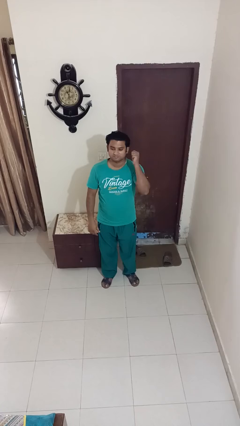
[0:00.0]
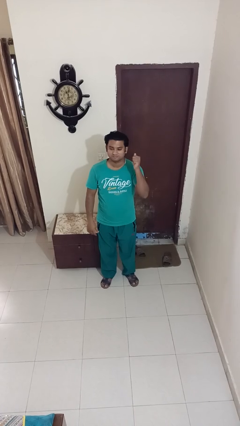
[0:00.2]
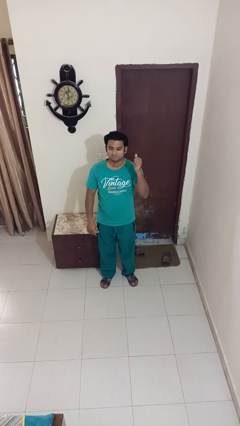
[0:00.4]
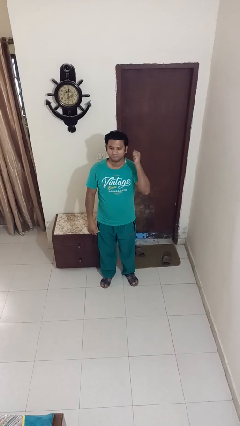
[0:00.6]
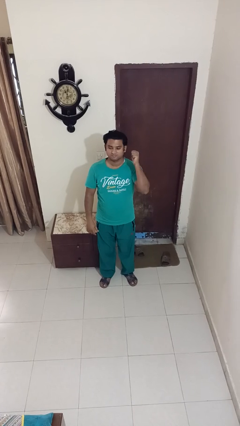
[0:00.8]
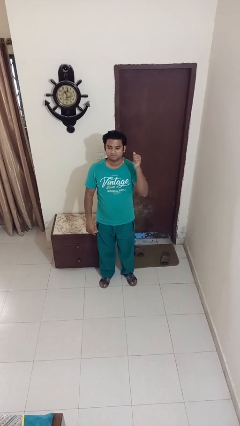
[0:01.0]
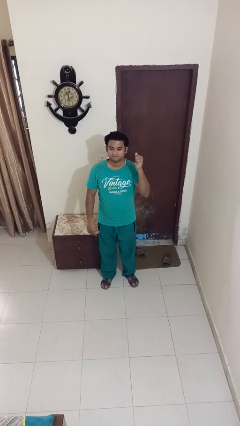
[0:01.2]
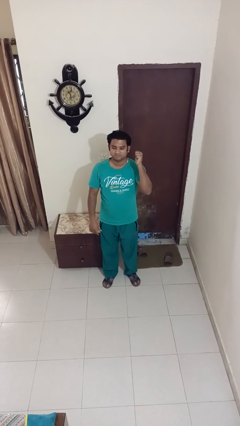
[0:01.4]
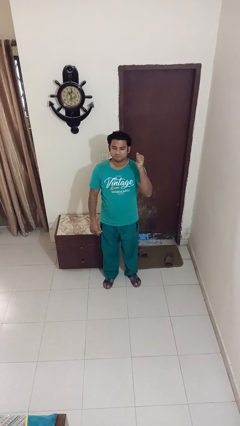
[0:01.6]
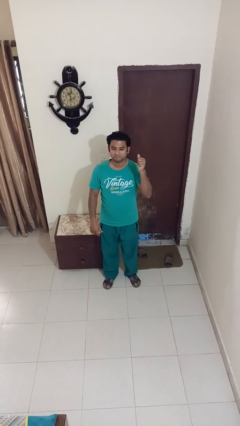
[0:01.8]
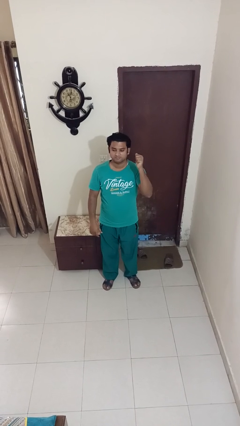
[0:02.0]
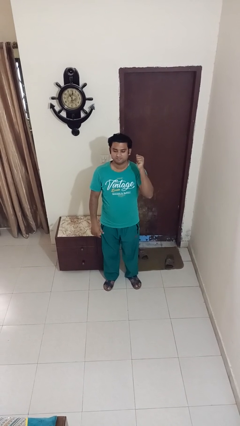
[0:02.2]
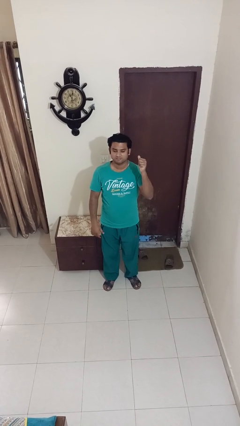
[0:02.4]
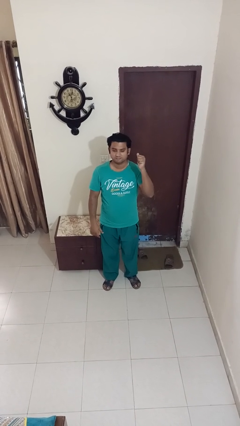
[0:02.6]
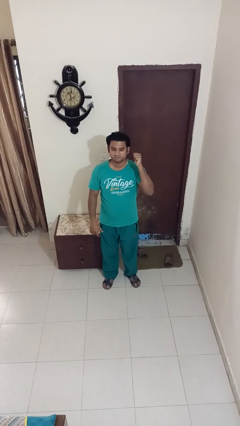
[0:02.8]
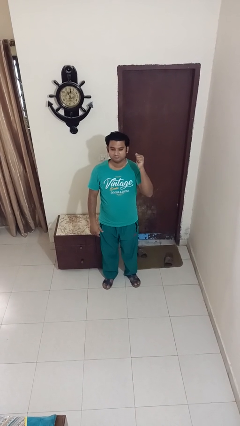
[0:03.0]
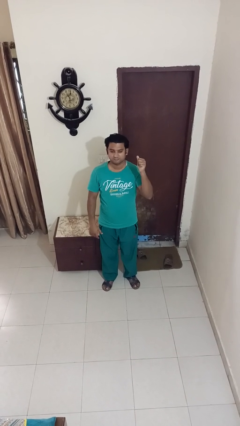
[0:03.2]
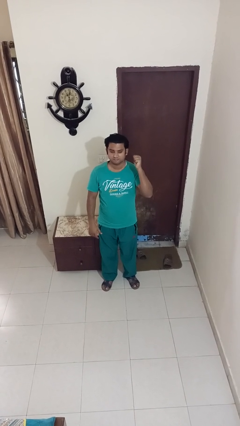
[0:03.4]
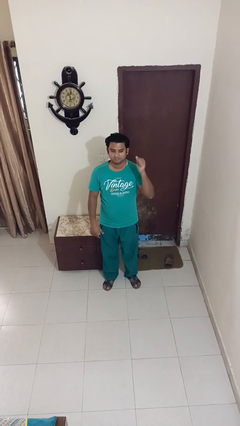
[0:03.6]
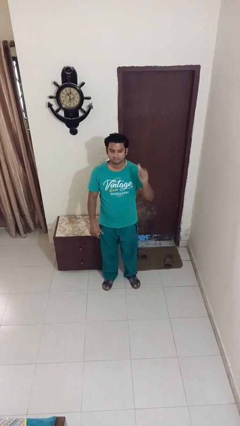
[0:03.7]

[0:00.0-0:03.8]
person gestures behind me

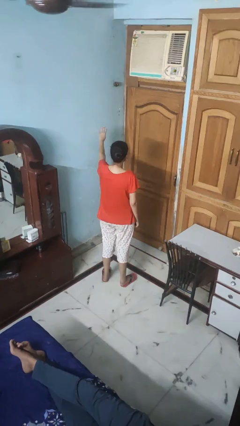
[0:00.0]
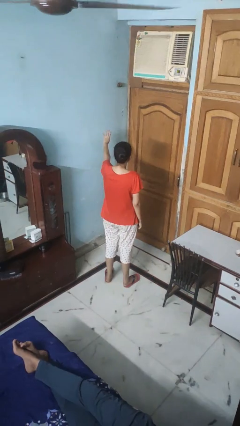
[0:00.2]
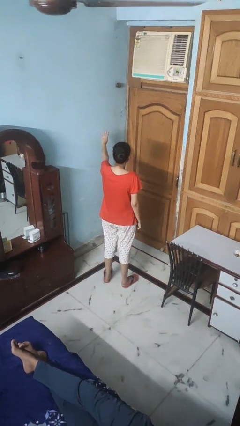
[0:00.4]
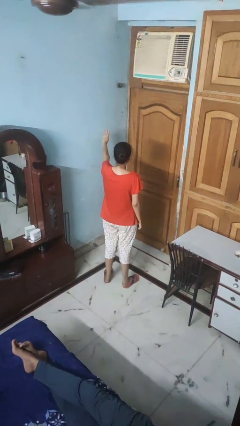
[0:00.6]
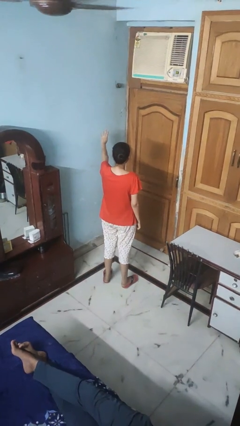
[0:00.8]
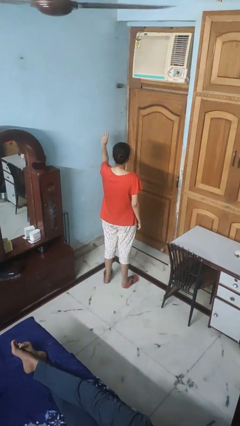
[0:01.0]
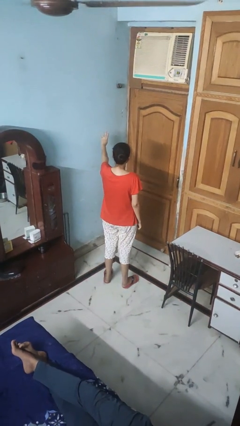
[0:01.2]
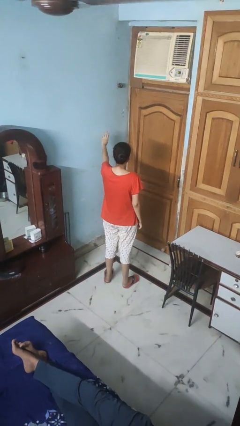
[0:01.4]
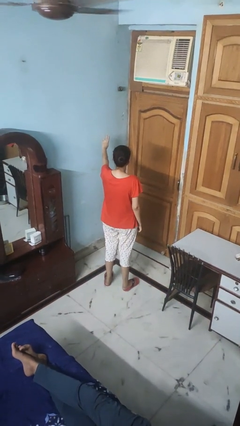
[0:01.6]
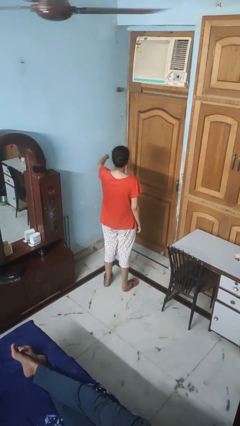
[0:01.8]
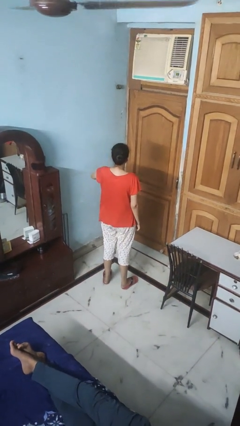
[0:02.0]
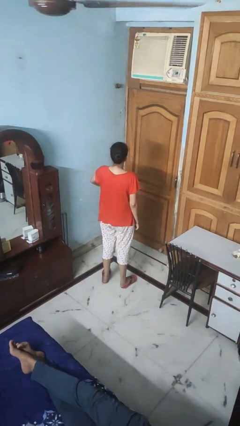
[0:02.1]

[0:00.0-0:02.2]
person gestures number four

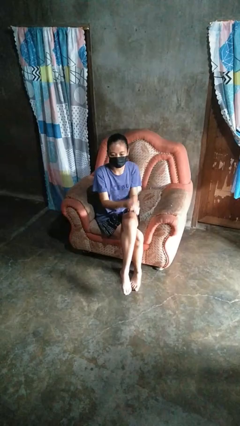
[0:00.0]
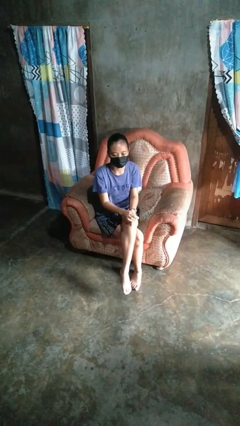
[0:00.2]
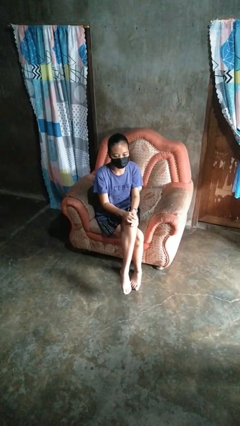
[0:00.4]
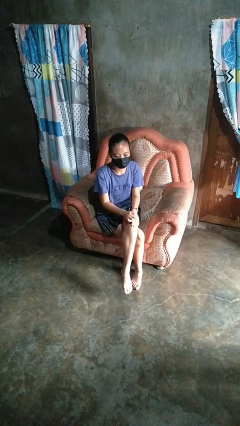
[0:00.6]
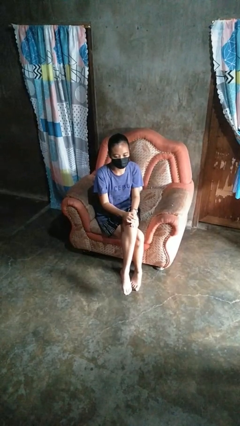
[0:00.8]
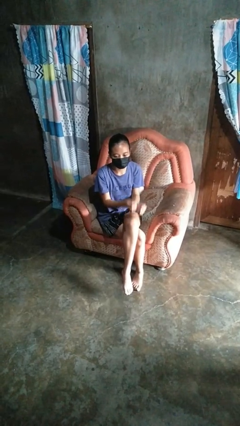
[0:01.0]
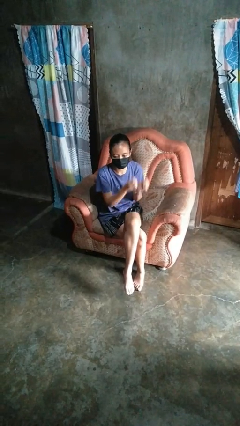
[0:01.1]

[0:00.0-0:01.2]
person takes off earrings

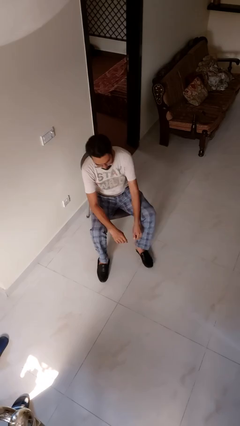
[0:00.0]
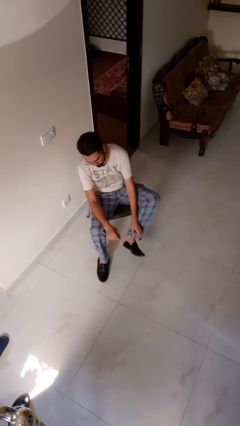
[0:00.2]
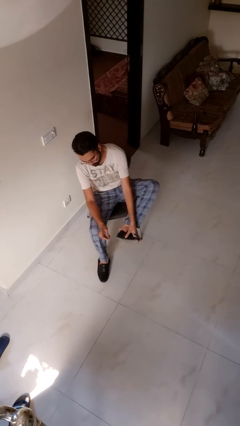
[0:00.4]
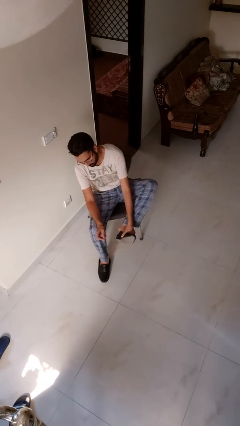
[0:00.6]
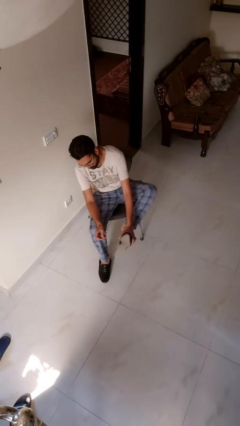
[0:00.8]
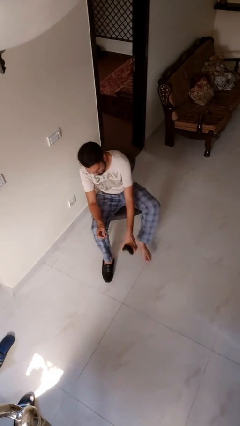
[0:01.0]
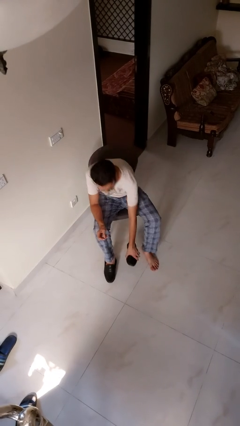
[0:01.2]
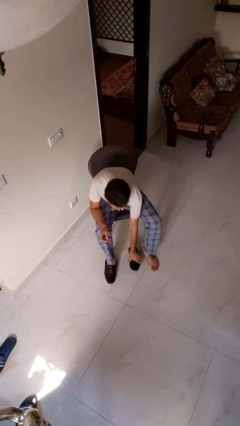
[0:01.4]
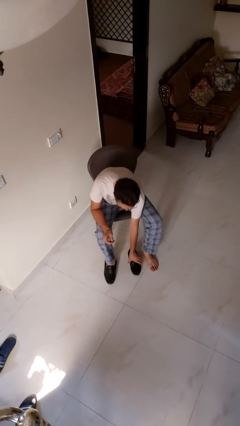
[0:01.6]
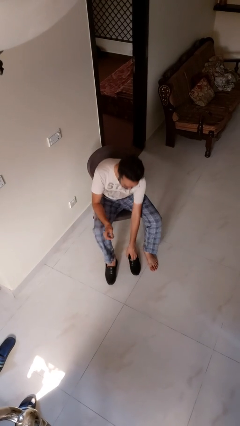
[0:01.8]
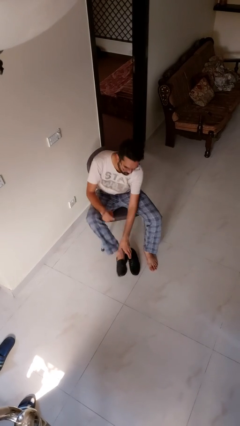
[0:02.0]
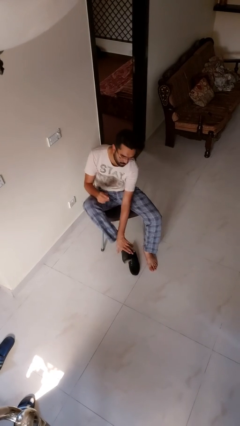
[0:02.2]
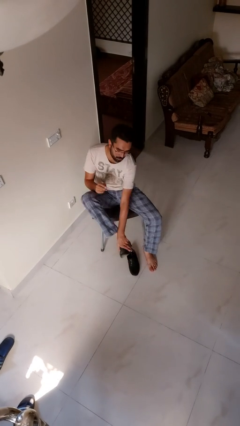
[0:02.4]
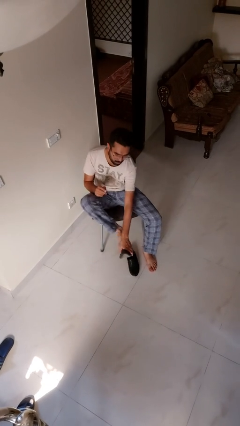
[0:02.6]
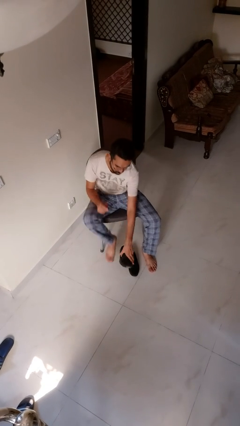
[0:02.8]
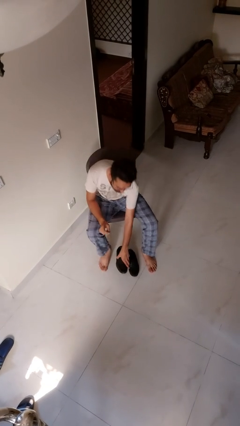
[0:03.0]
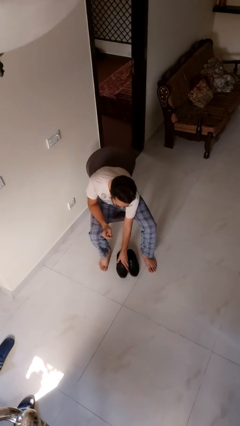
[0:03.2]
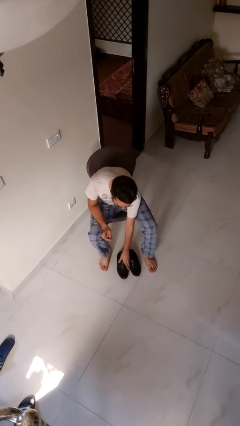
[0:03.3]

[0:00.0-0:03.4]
person takes off boots

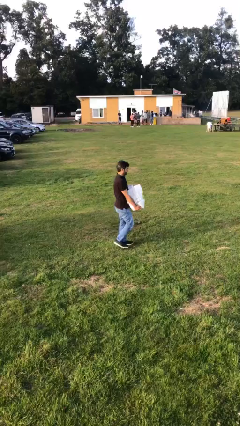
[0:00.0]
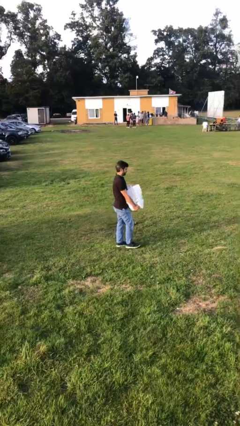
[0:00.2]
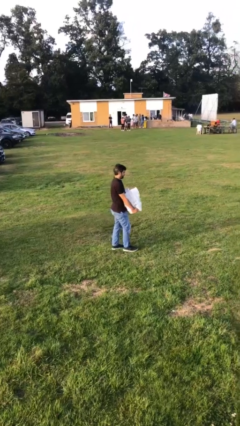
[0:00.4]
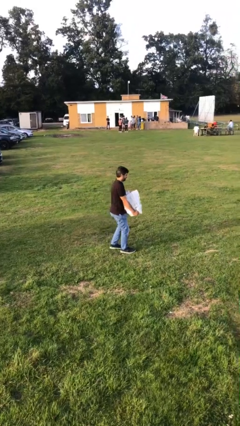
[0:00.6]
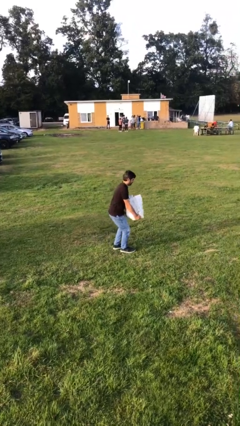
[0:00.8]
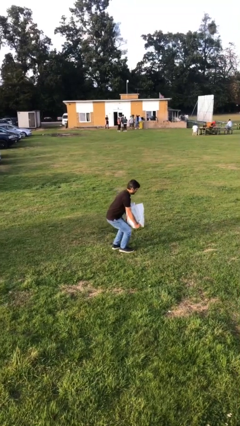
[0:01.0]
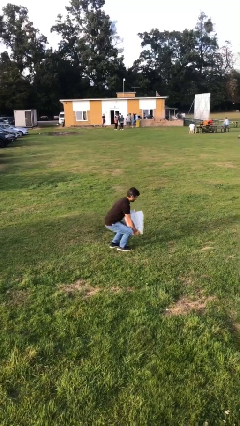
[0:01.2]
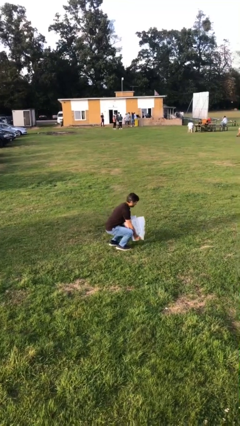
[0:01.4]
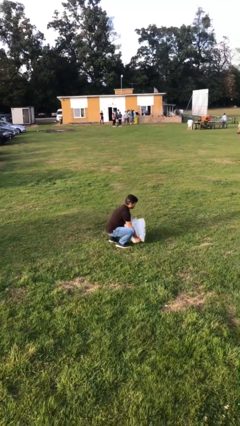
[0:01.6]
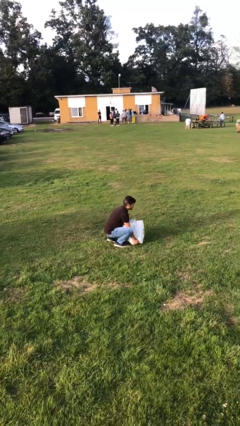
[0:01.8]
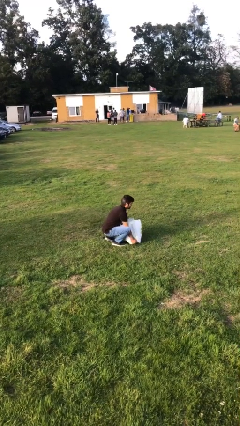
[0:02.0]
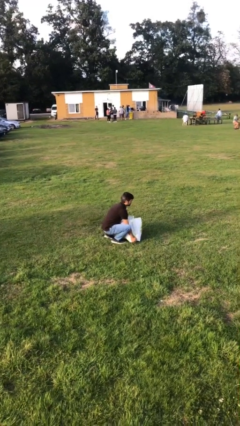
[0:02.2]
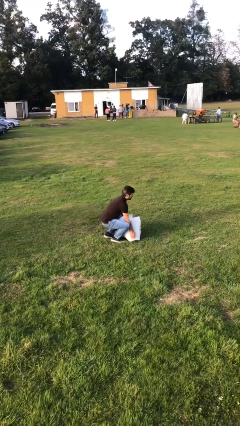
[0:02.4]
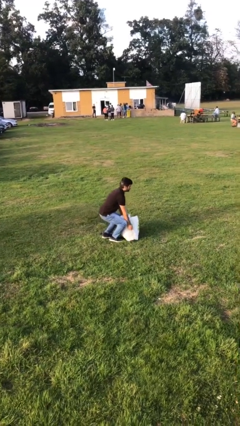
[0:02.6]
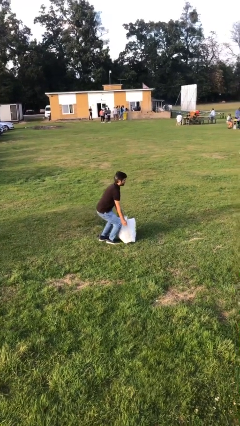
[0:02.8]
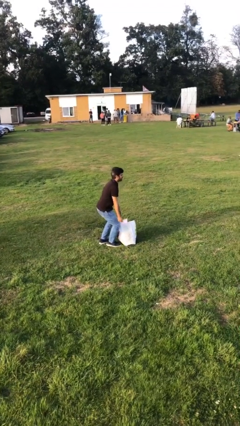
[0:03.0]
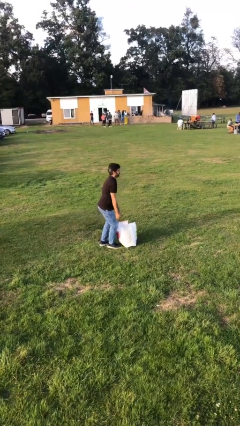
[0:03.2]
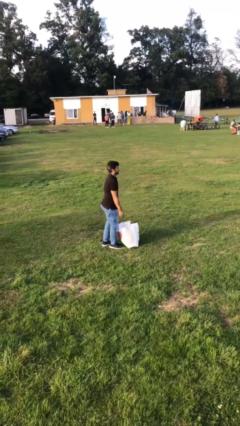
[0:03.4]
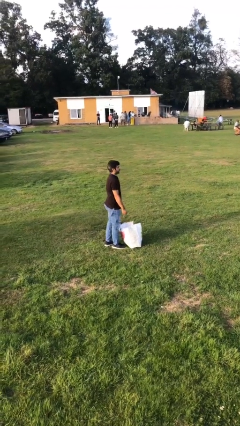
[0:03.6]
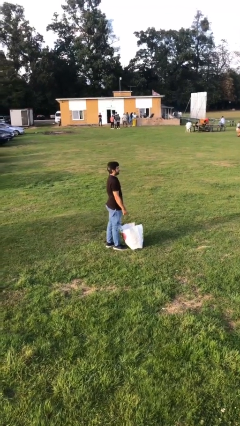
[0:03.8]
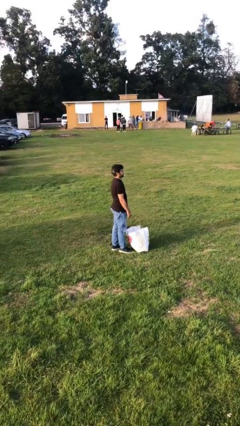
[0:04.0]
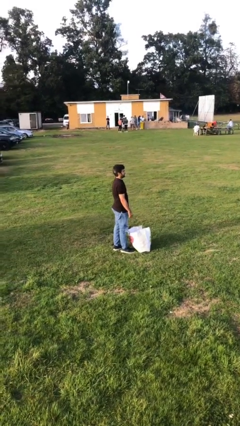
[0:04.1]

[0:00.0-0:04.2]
person puts down object on floor

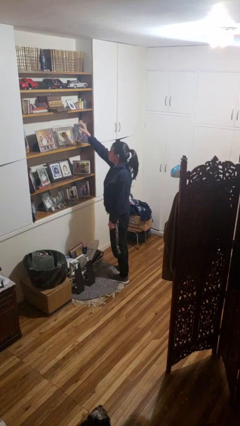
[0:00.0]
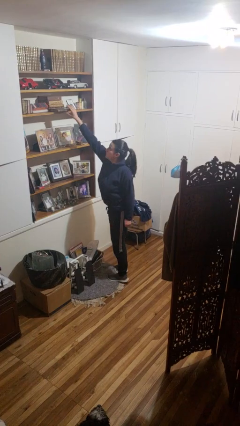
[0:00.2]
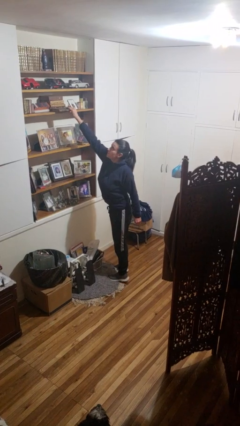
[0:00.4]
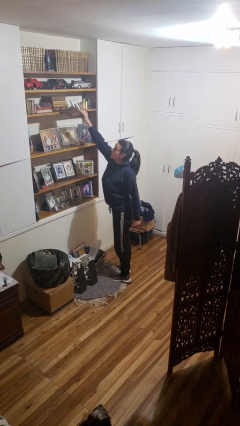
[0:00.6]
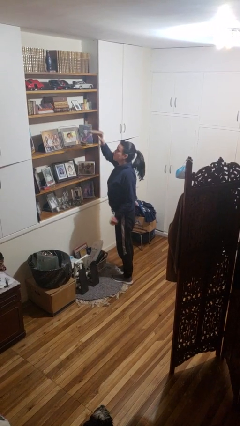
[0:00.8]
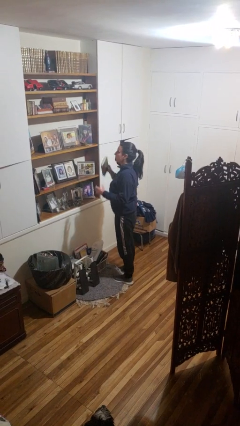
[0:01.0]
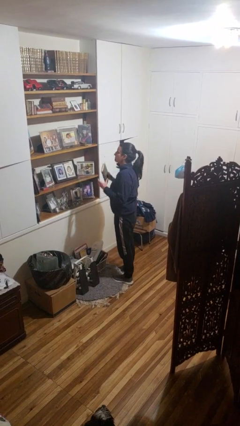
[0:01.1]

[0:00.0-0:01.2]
person picks up object from shelf

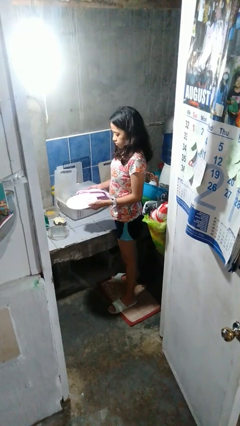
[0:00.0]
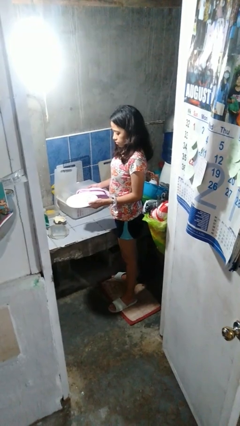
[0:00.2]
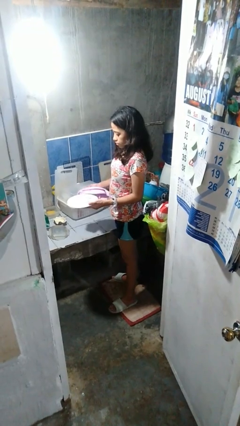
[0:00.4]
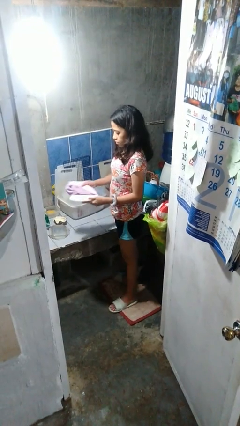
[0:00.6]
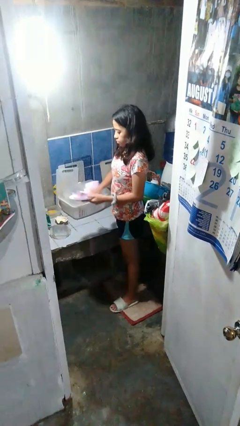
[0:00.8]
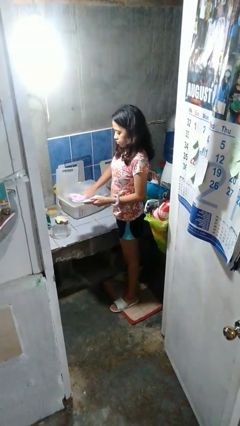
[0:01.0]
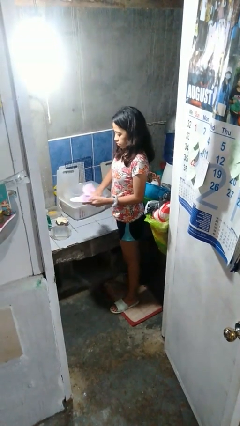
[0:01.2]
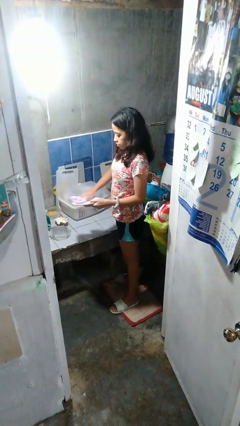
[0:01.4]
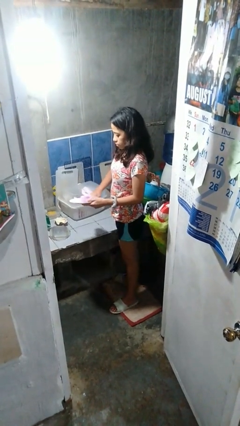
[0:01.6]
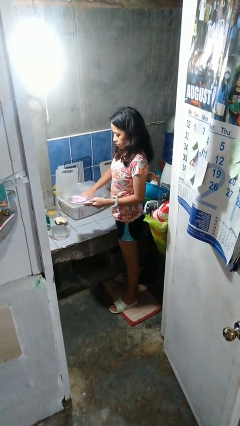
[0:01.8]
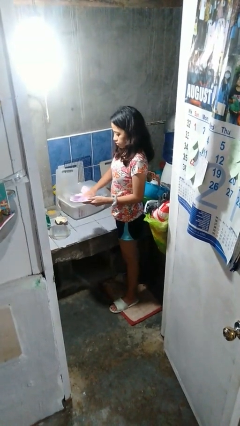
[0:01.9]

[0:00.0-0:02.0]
person dries dish
